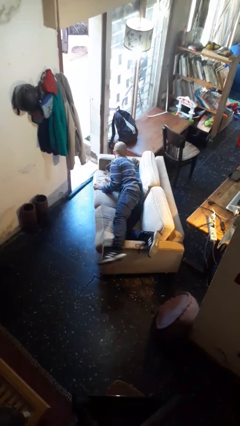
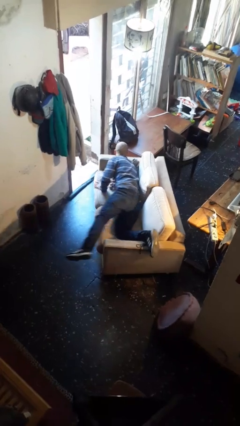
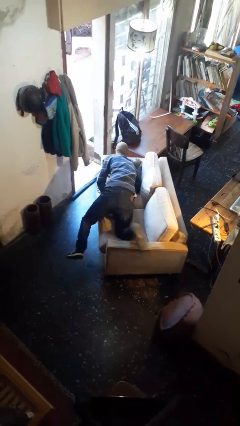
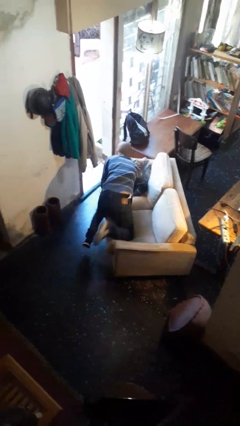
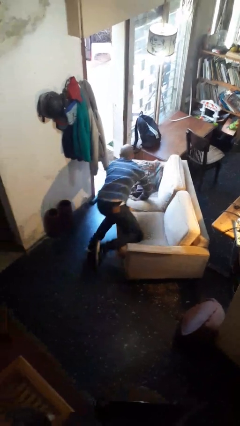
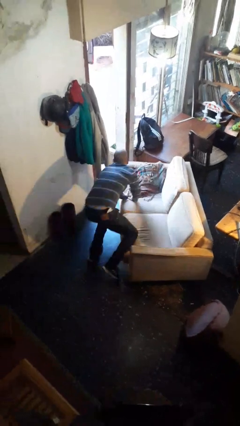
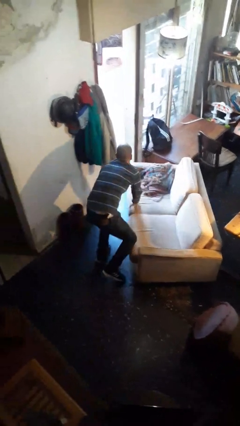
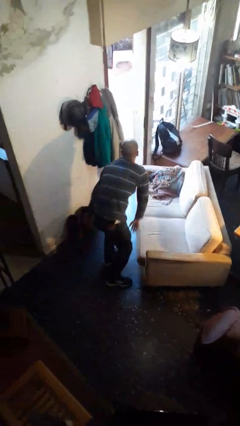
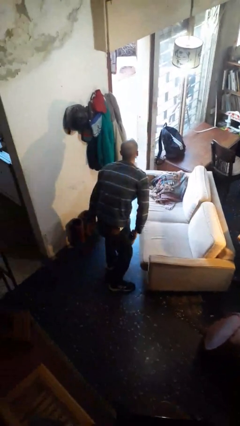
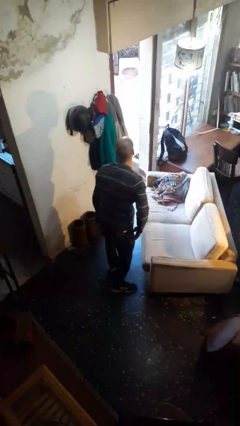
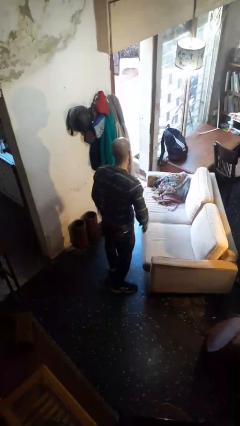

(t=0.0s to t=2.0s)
person stands up

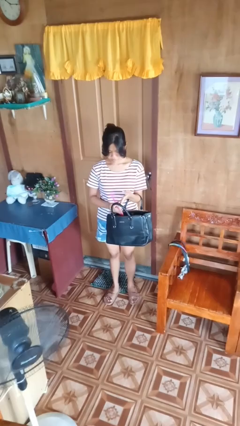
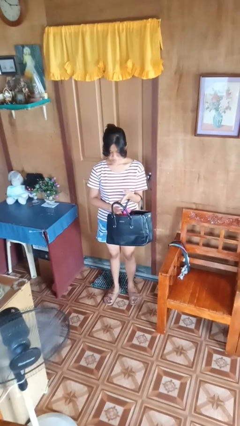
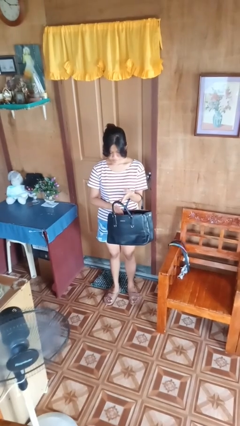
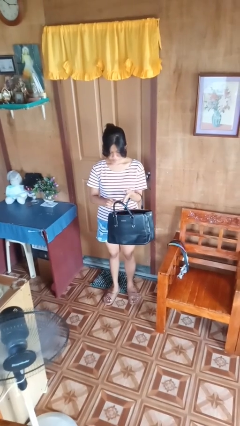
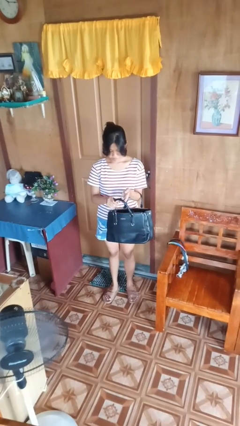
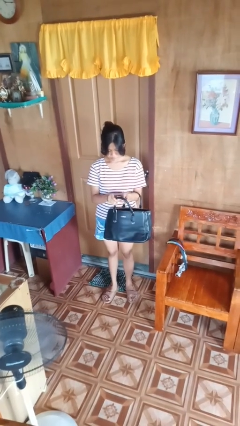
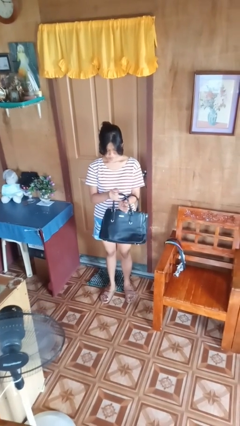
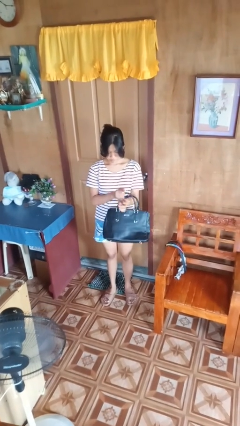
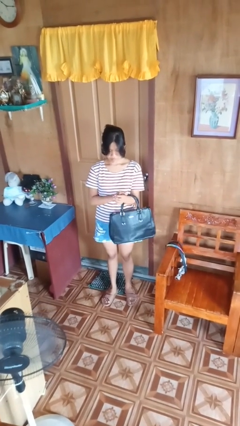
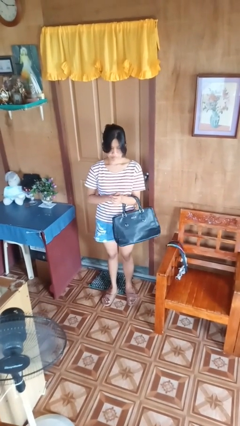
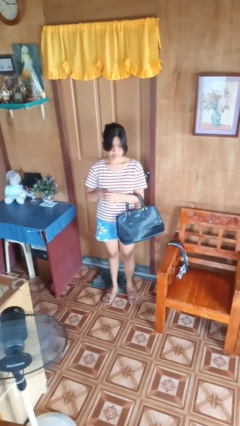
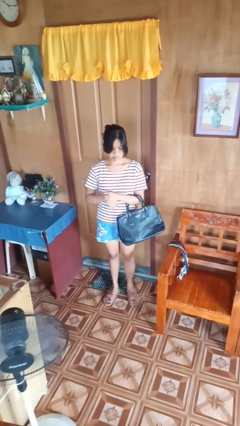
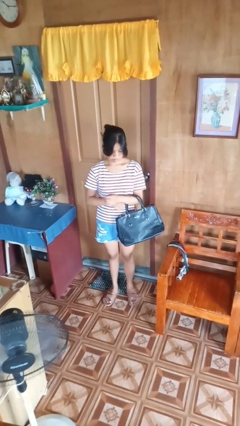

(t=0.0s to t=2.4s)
person puts object into purse

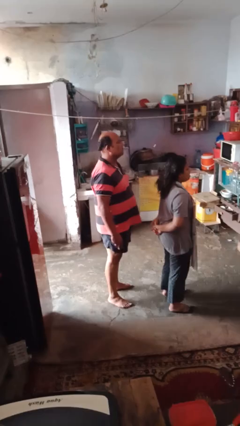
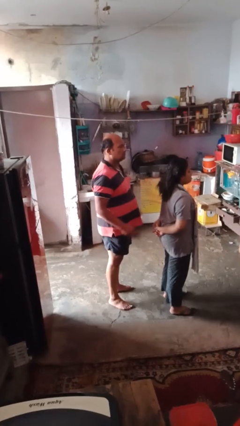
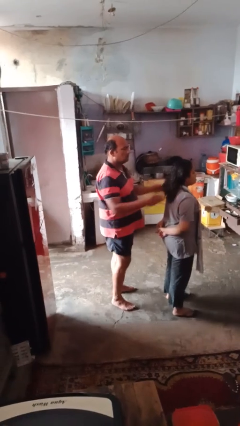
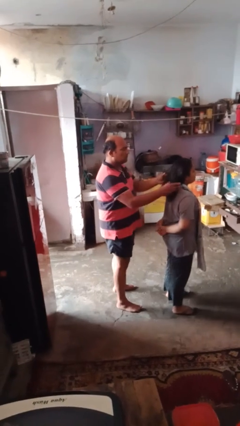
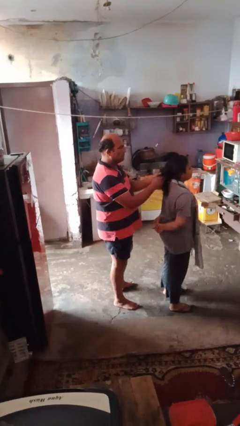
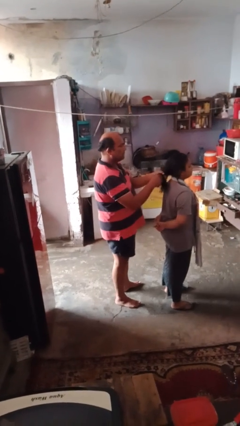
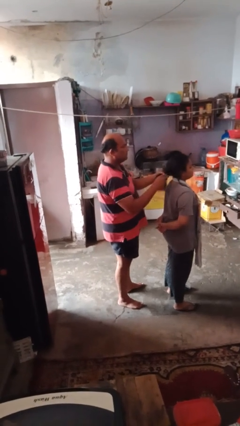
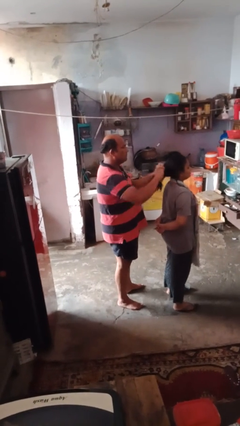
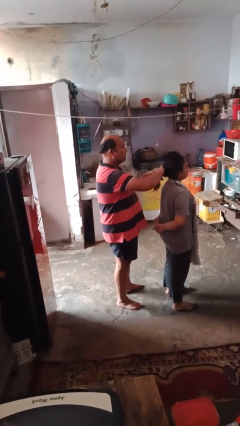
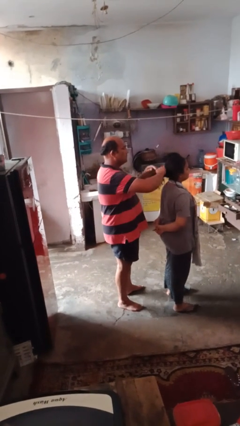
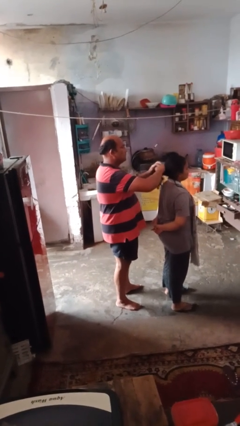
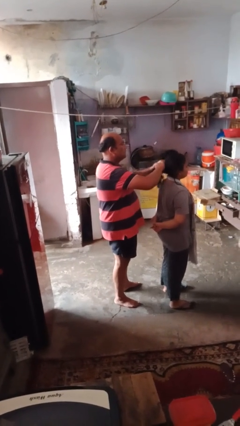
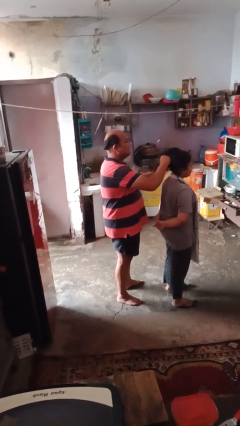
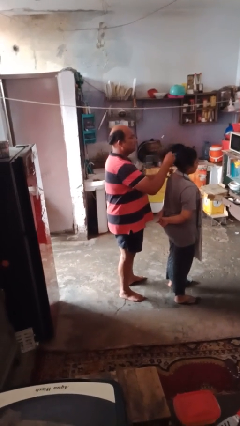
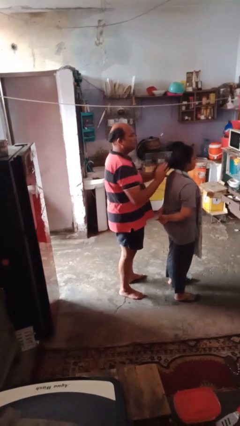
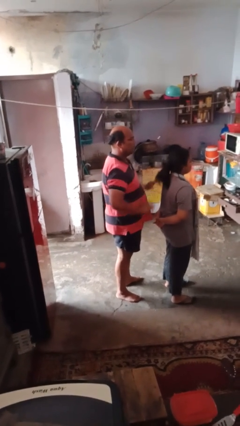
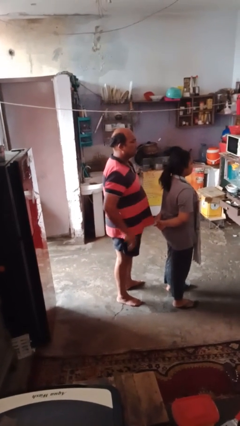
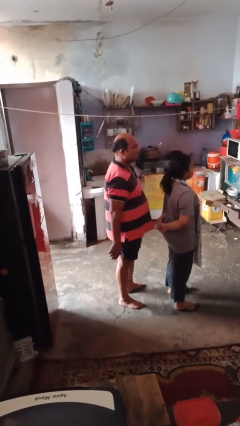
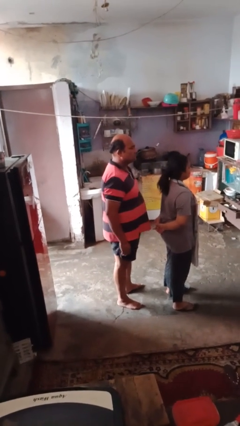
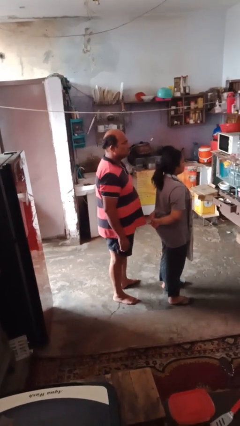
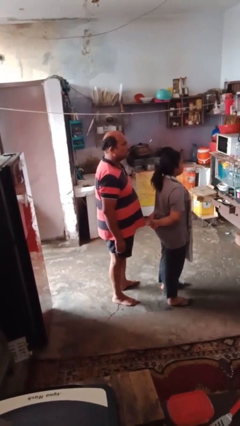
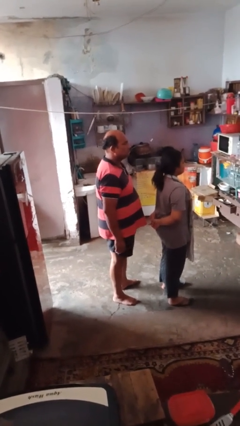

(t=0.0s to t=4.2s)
person braids hair of person

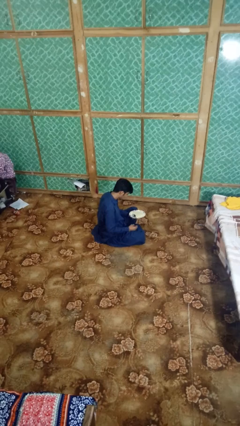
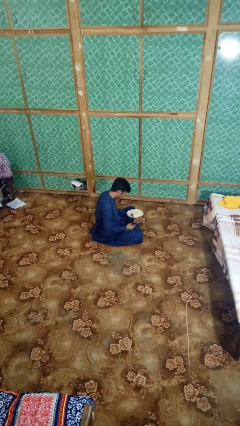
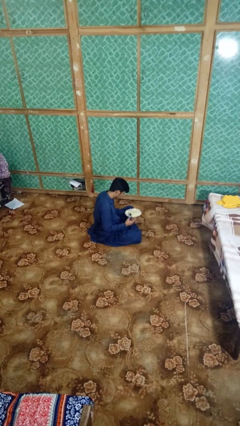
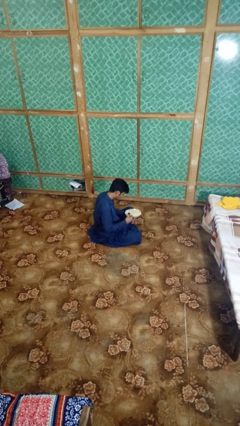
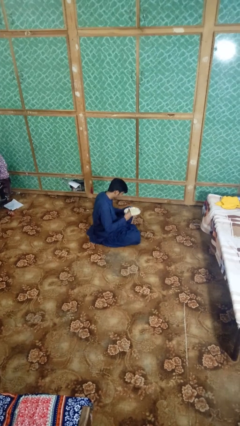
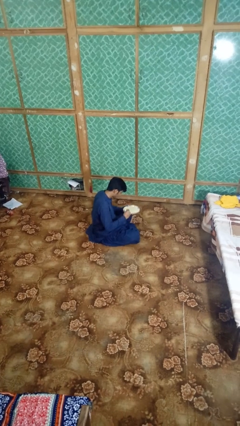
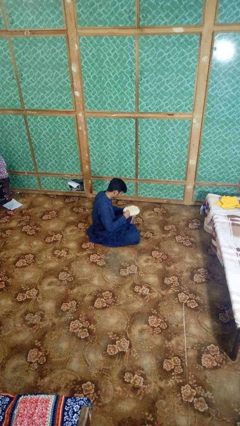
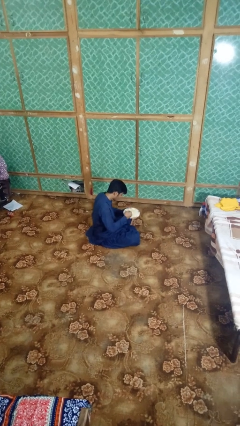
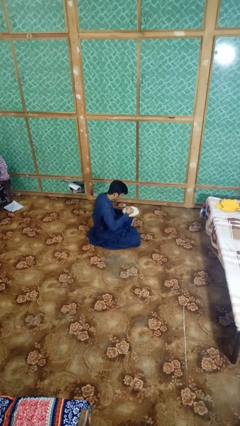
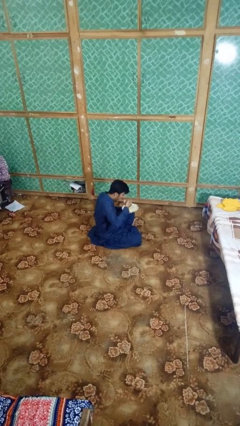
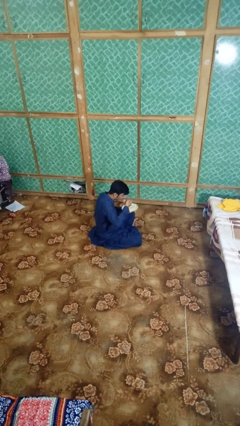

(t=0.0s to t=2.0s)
person eats with utensil

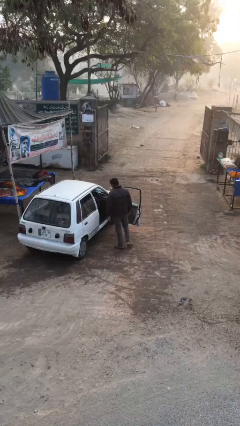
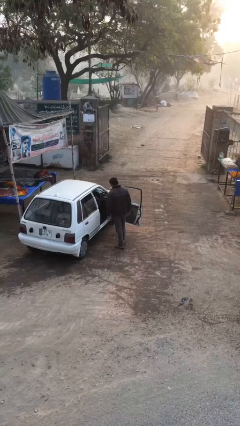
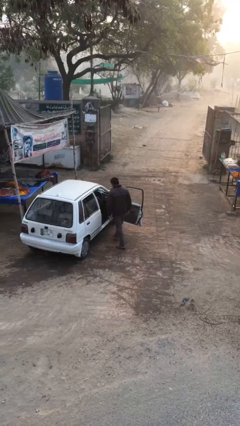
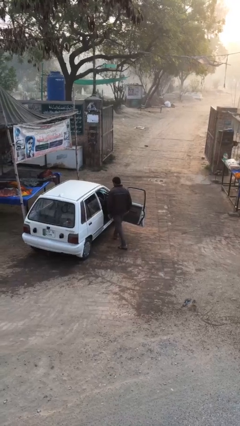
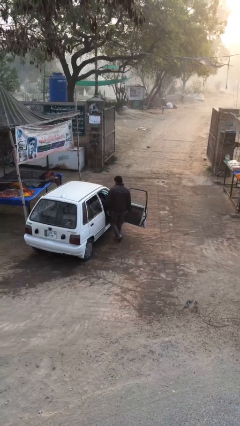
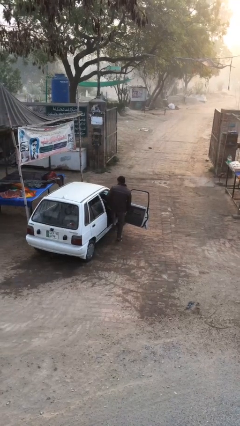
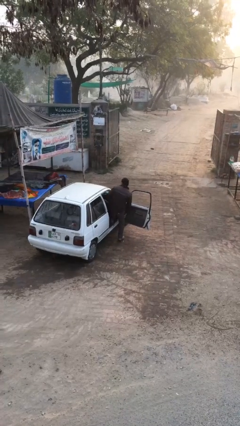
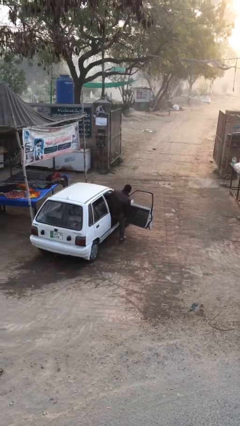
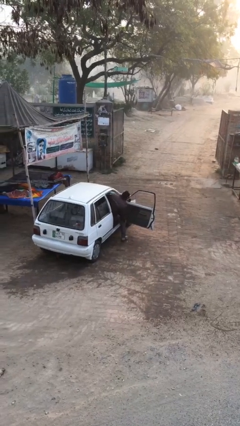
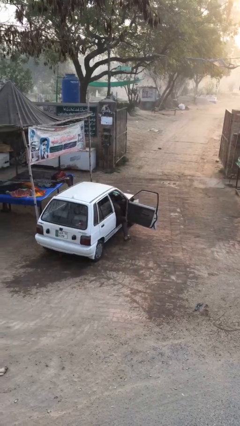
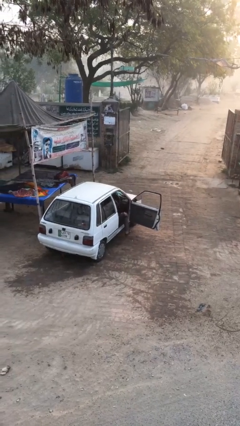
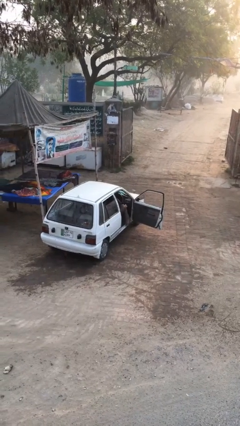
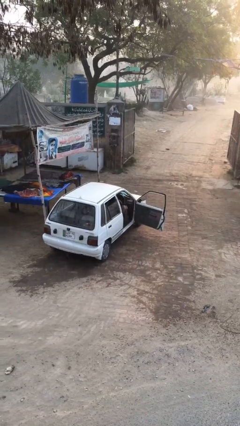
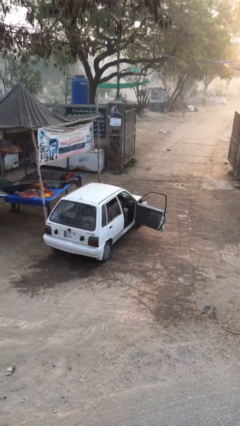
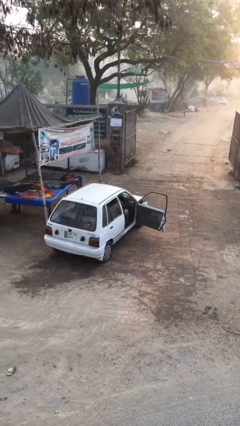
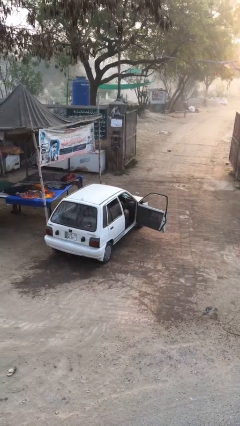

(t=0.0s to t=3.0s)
person enters car

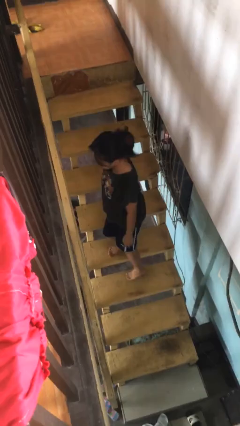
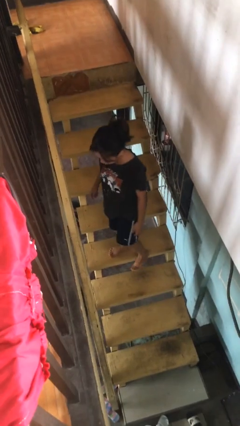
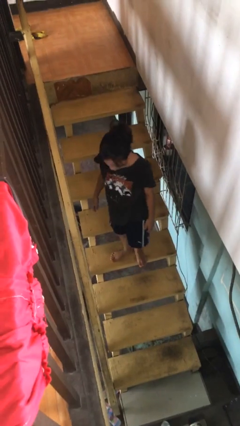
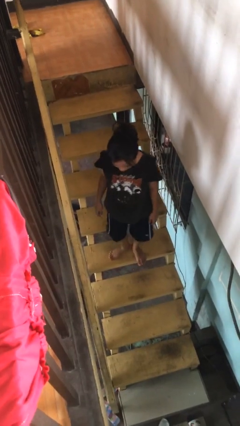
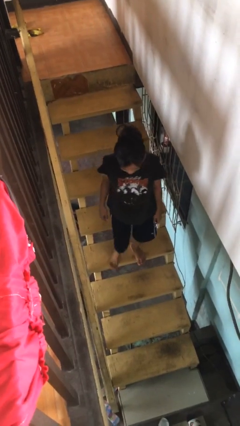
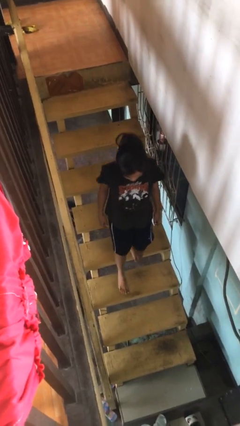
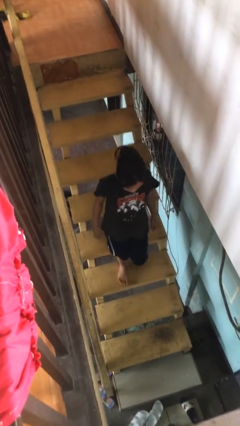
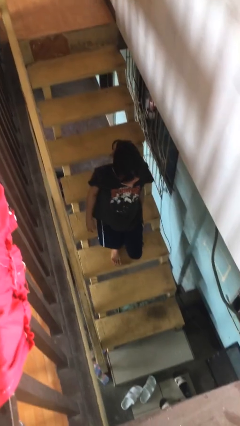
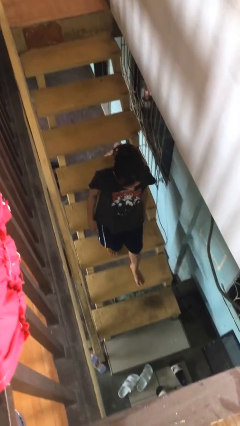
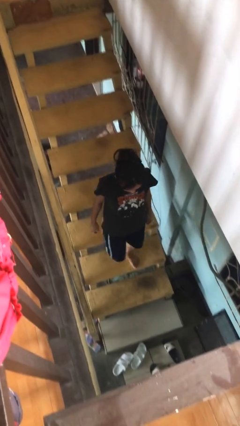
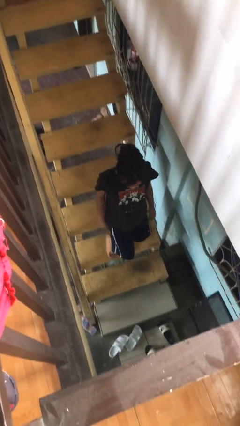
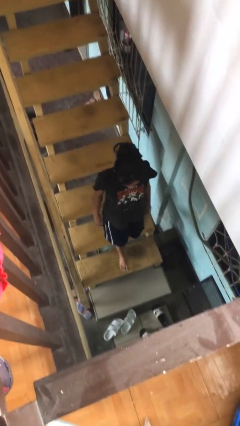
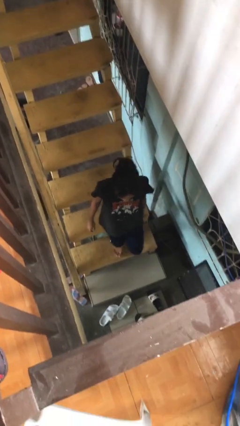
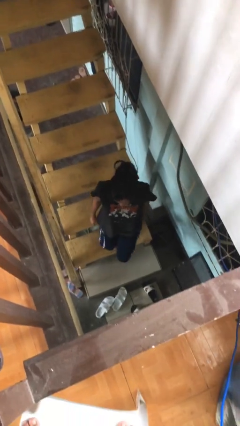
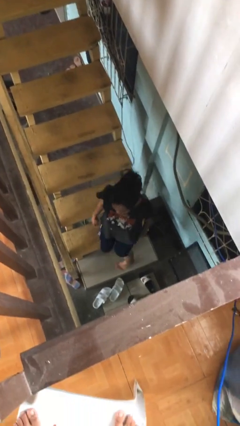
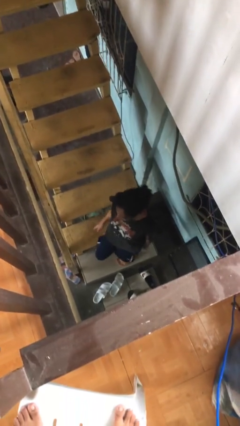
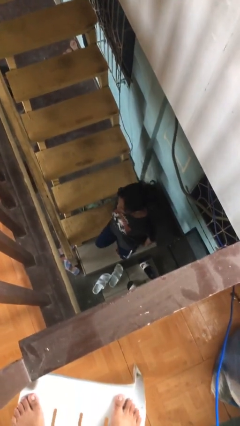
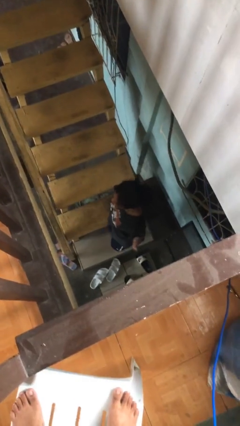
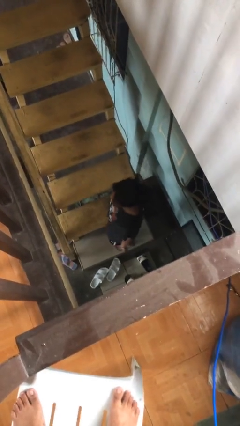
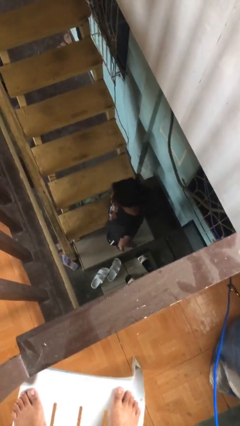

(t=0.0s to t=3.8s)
person climbs down stairs

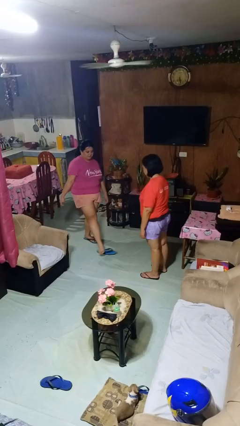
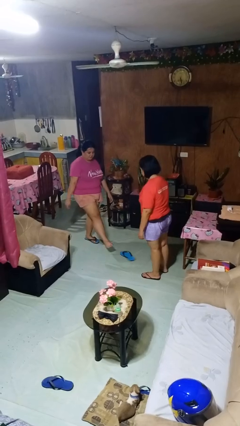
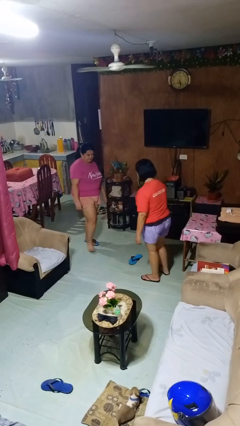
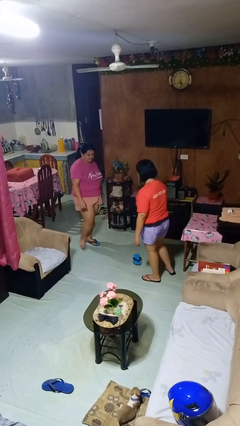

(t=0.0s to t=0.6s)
person kicks object to person
